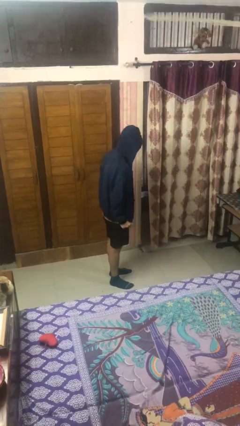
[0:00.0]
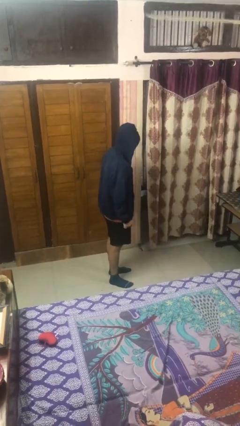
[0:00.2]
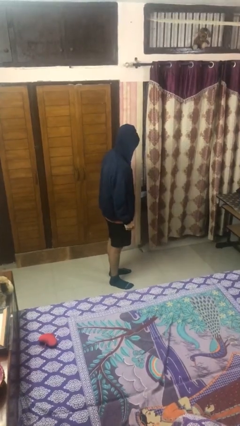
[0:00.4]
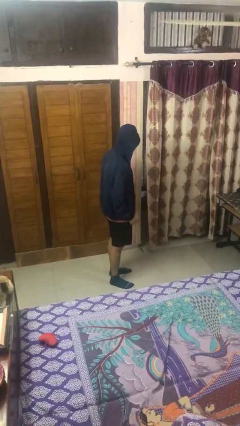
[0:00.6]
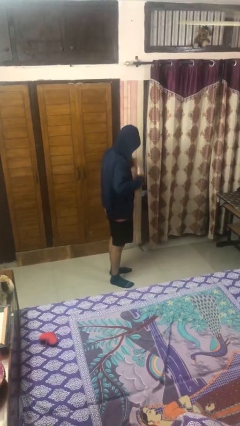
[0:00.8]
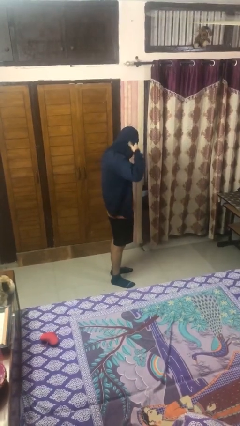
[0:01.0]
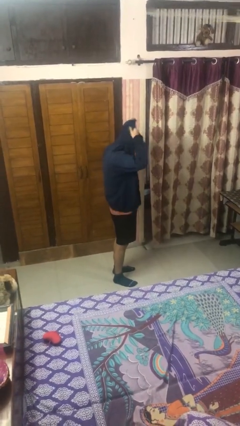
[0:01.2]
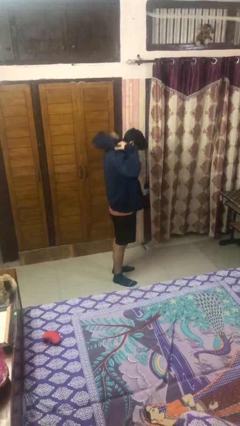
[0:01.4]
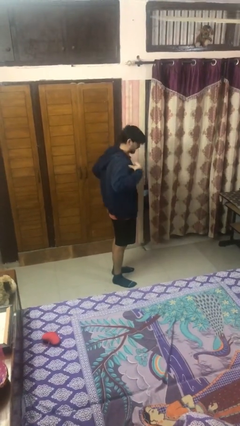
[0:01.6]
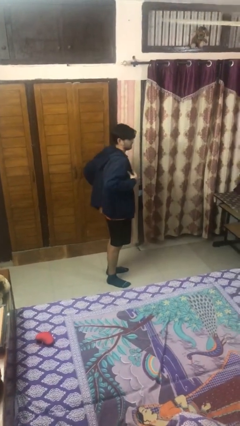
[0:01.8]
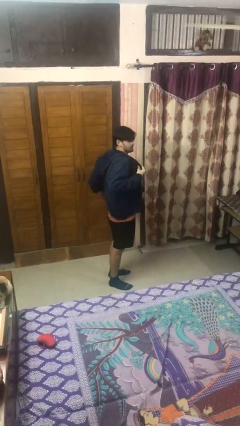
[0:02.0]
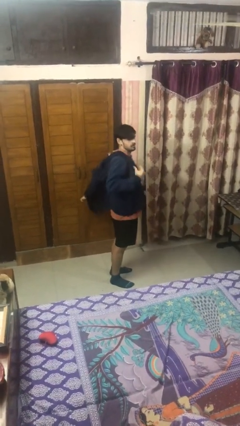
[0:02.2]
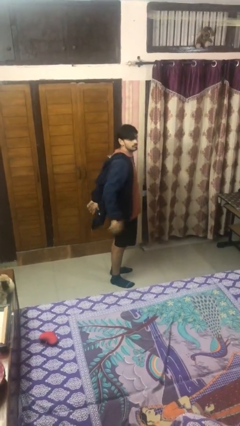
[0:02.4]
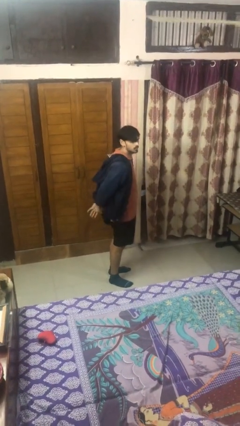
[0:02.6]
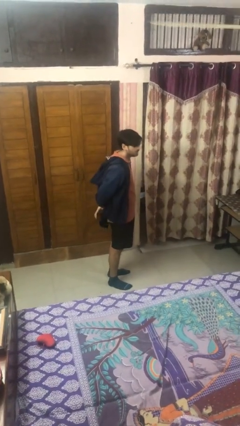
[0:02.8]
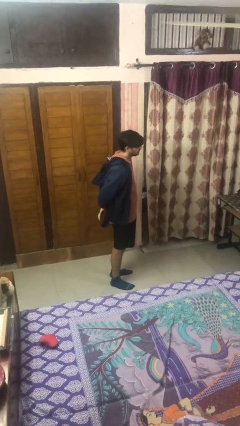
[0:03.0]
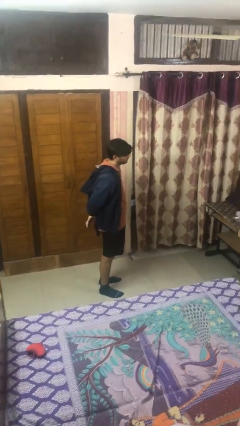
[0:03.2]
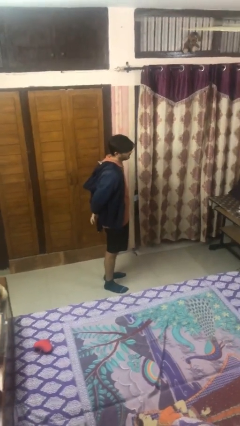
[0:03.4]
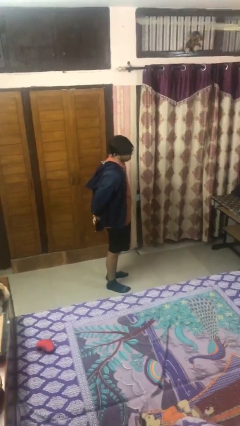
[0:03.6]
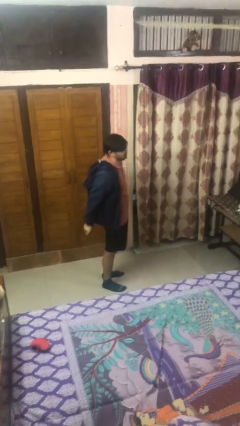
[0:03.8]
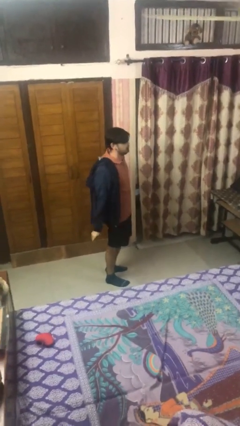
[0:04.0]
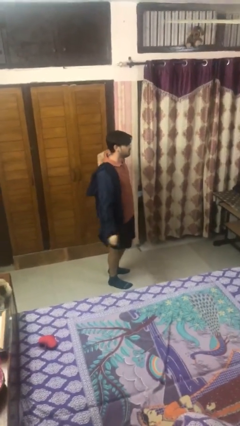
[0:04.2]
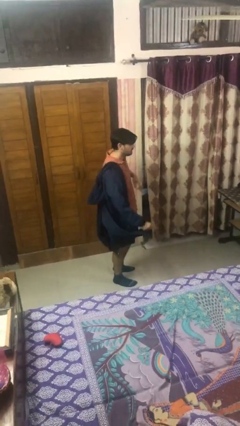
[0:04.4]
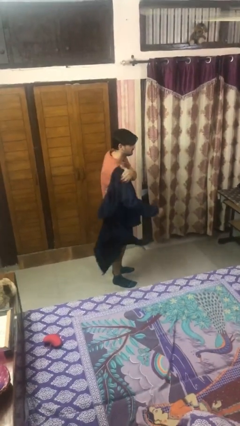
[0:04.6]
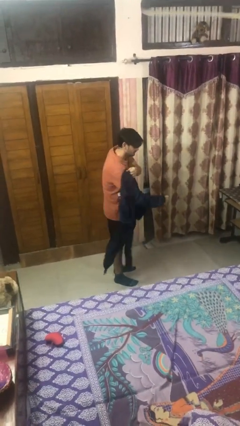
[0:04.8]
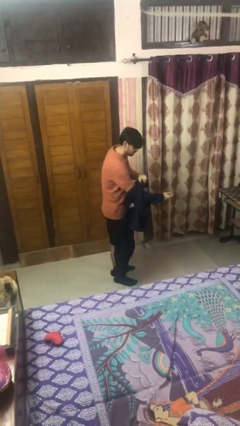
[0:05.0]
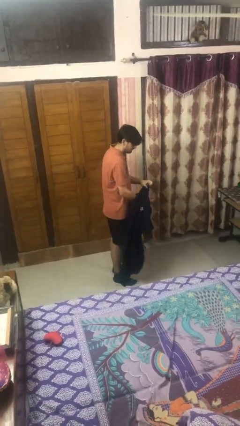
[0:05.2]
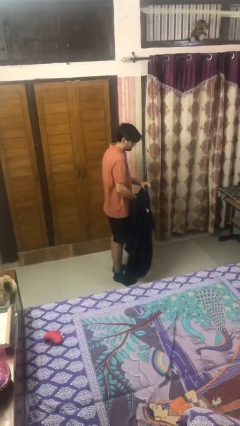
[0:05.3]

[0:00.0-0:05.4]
person takes off hoodie

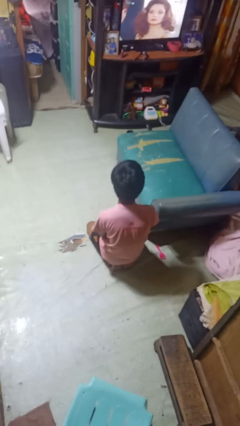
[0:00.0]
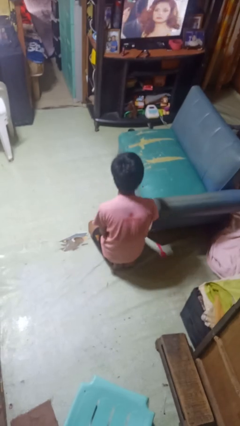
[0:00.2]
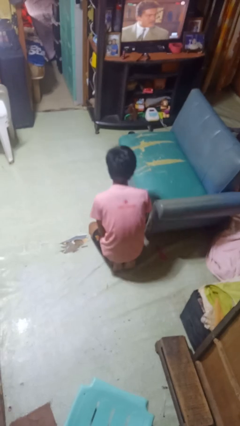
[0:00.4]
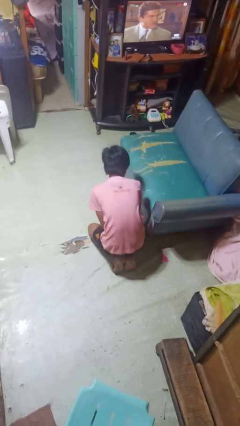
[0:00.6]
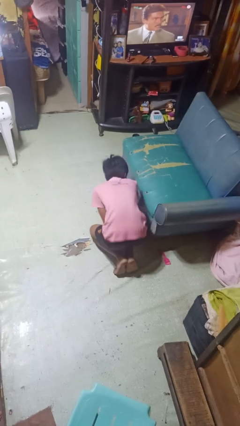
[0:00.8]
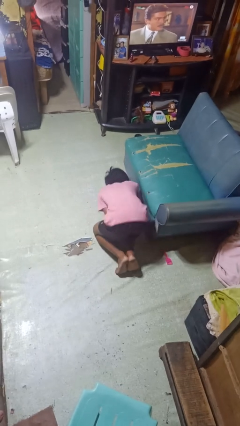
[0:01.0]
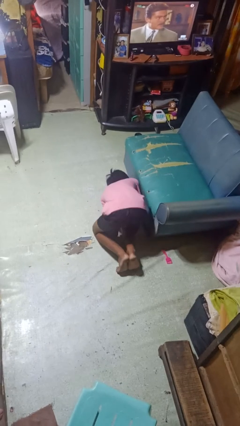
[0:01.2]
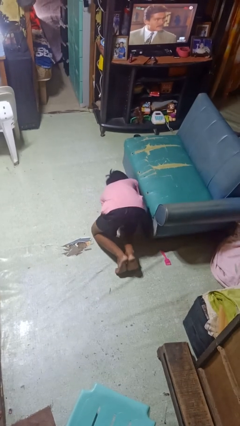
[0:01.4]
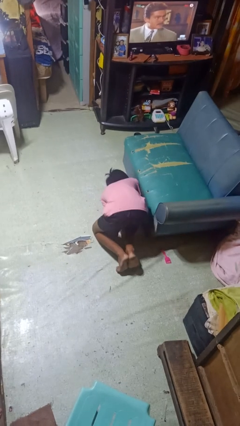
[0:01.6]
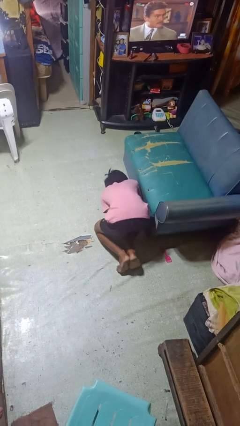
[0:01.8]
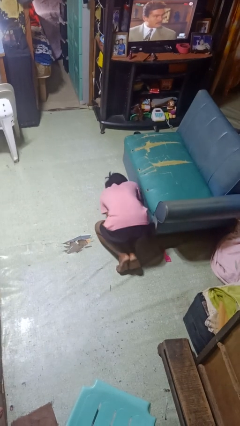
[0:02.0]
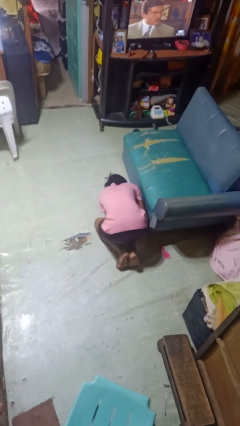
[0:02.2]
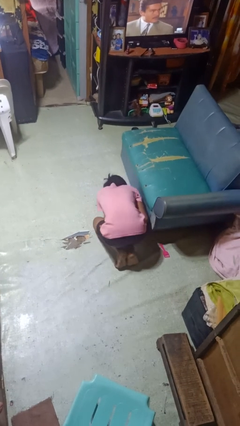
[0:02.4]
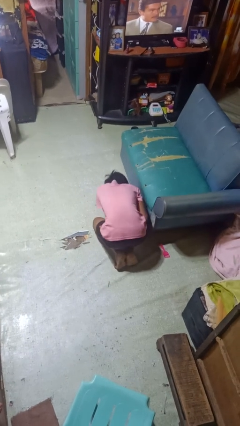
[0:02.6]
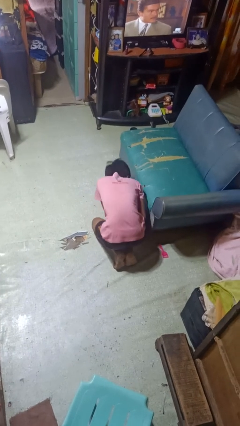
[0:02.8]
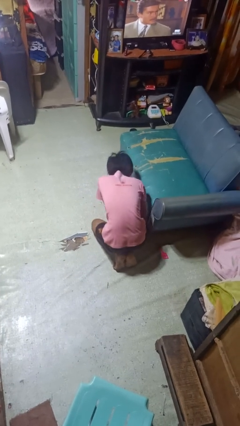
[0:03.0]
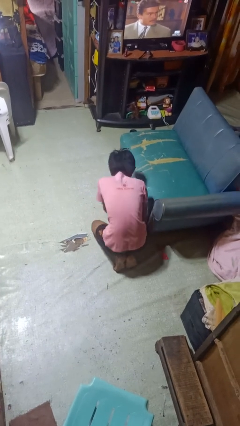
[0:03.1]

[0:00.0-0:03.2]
person searches under couch

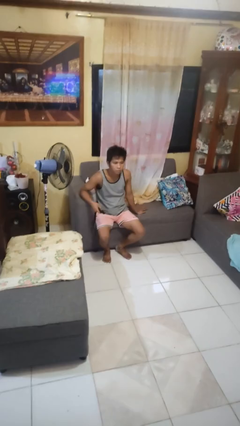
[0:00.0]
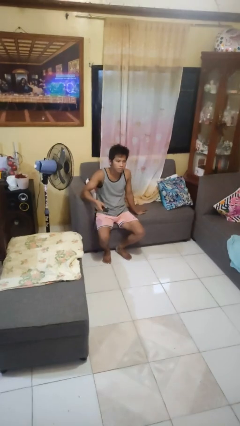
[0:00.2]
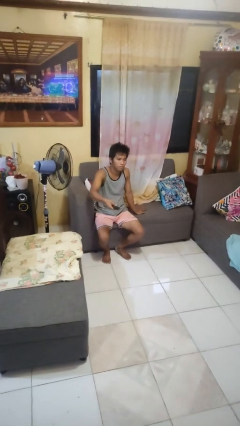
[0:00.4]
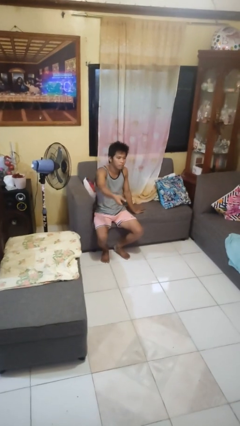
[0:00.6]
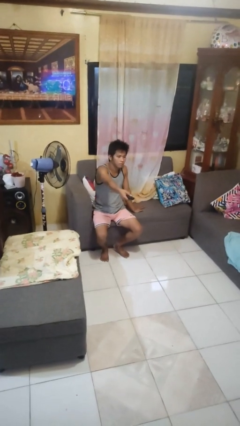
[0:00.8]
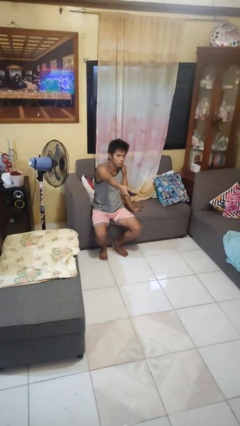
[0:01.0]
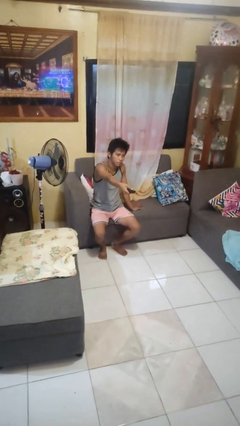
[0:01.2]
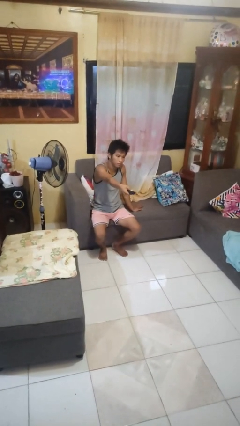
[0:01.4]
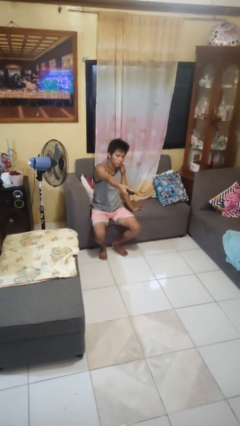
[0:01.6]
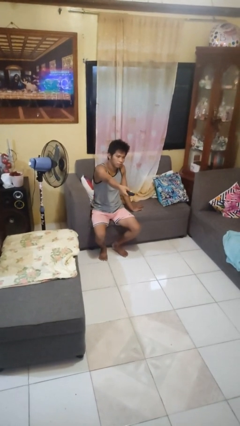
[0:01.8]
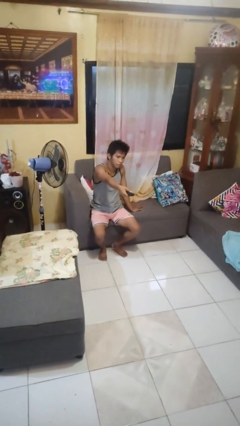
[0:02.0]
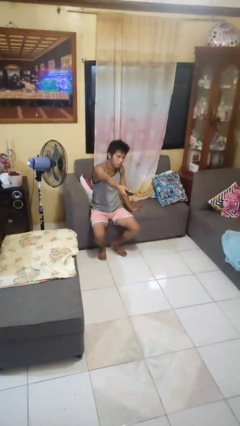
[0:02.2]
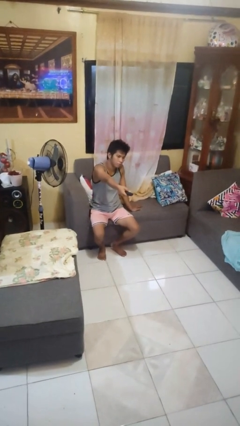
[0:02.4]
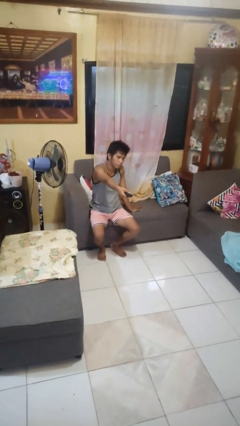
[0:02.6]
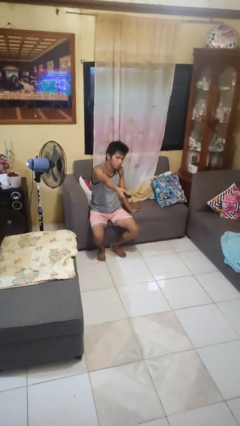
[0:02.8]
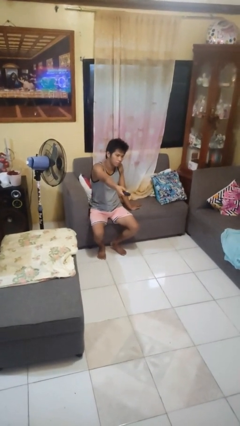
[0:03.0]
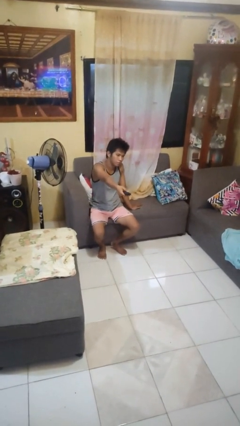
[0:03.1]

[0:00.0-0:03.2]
person uses television remote

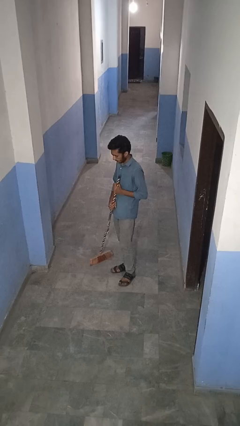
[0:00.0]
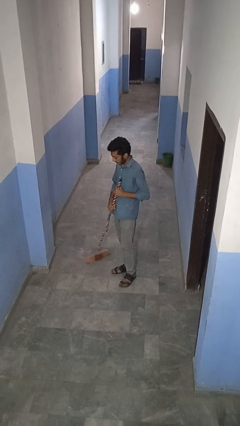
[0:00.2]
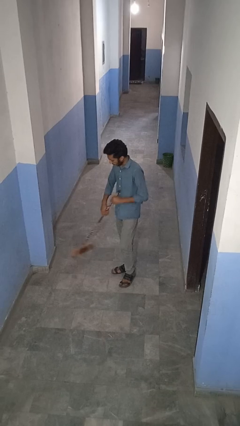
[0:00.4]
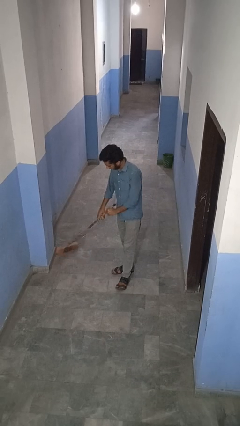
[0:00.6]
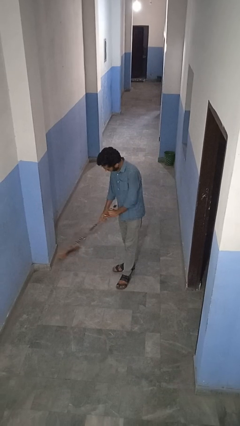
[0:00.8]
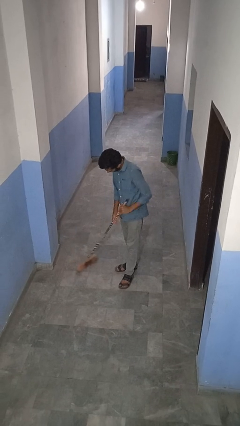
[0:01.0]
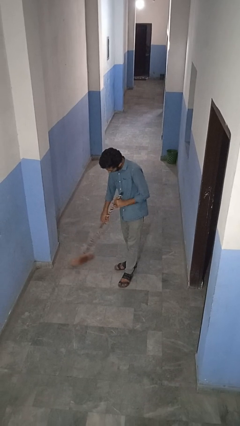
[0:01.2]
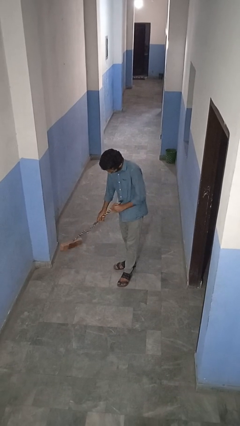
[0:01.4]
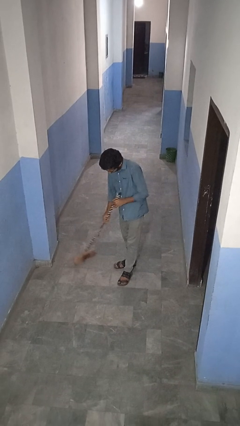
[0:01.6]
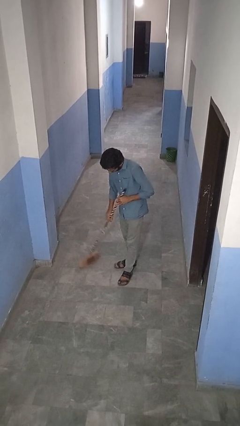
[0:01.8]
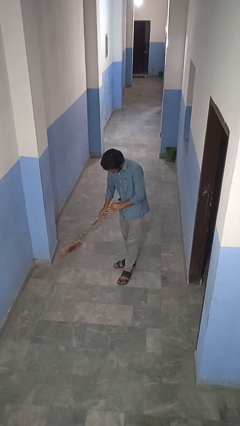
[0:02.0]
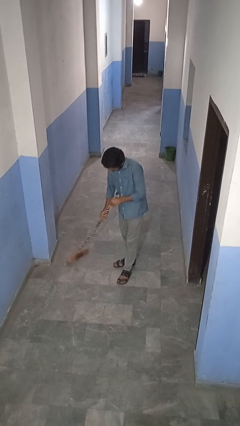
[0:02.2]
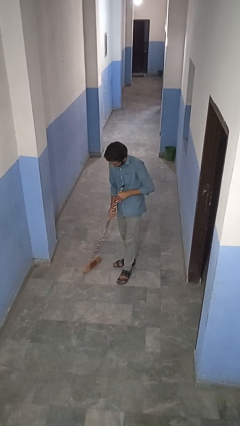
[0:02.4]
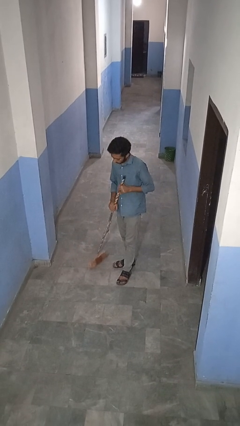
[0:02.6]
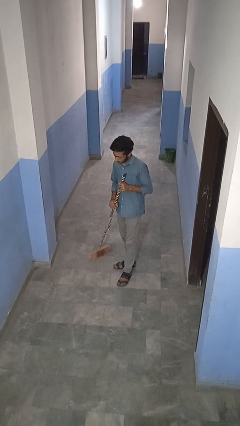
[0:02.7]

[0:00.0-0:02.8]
person sweeps floor

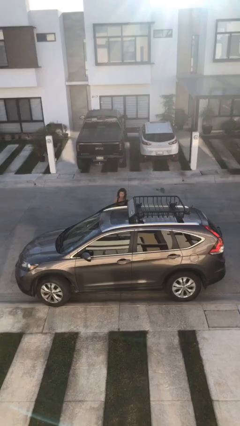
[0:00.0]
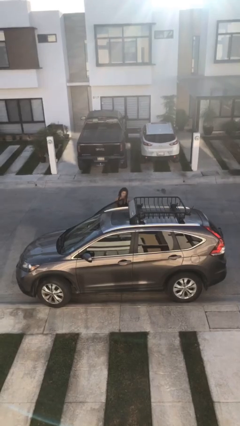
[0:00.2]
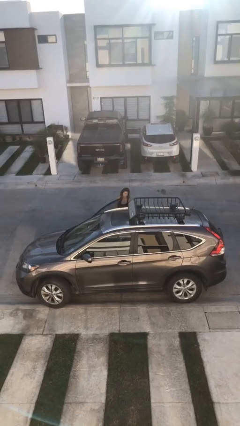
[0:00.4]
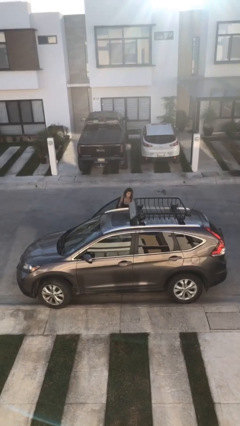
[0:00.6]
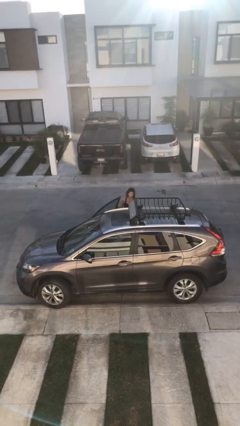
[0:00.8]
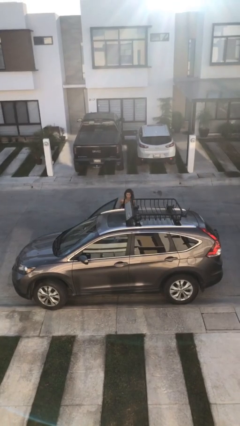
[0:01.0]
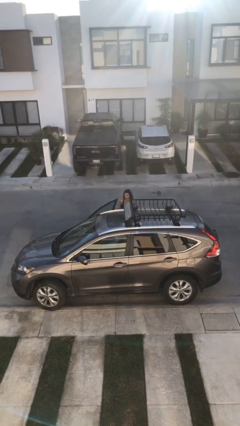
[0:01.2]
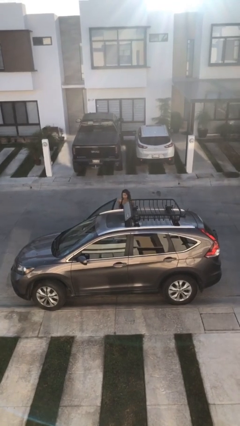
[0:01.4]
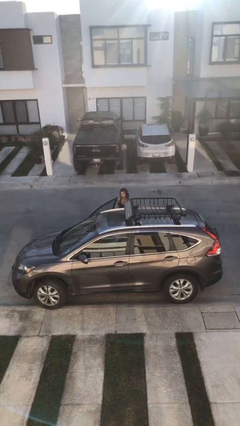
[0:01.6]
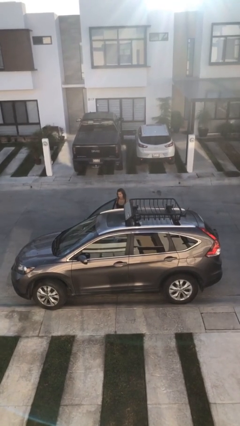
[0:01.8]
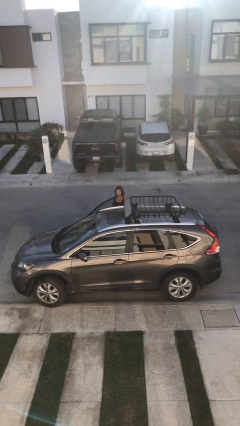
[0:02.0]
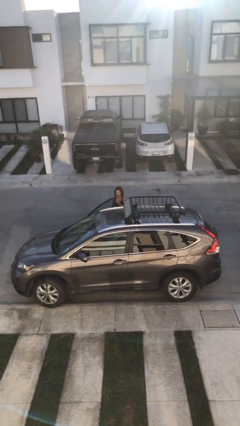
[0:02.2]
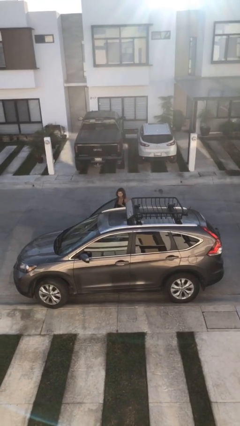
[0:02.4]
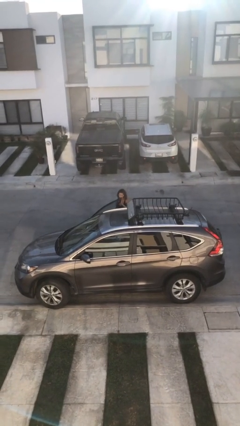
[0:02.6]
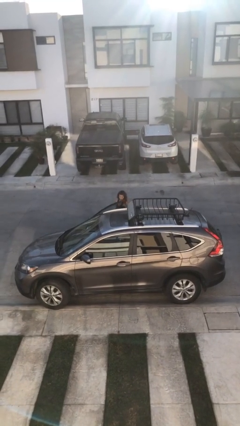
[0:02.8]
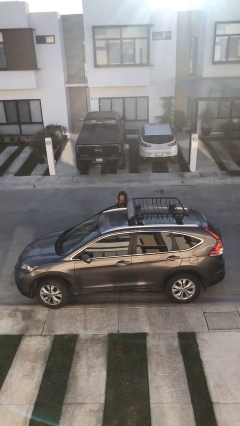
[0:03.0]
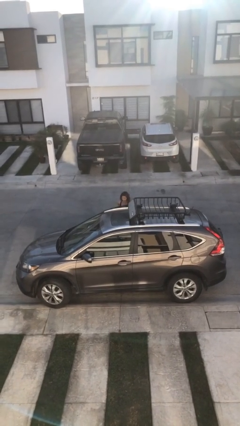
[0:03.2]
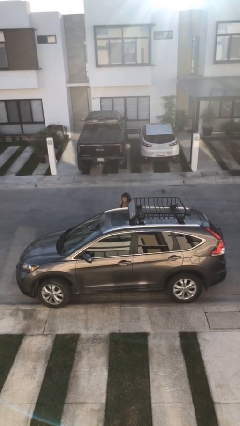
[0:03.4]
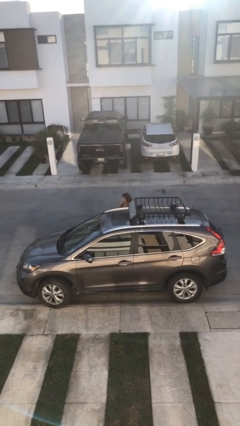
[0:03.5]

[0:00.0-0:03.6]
person opens car door
